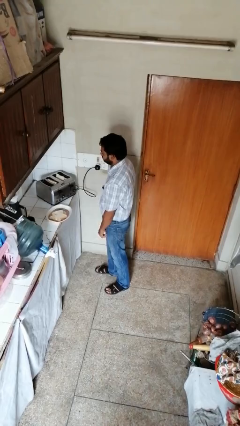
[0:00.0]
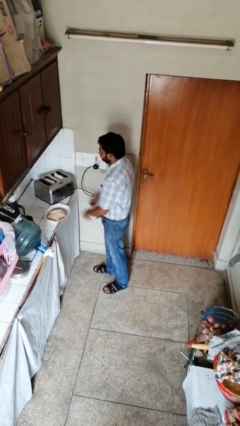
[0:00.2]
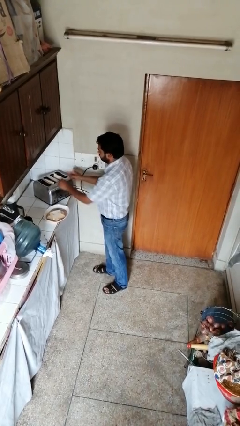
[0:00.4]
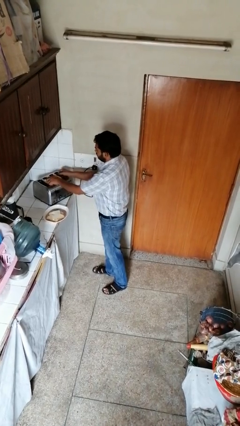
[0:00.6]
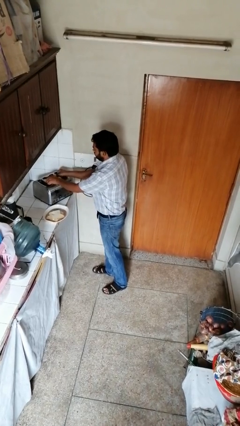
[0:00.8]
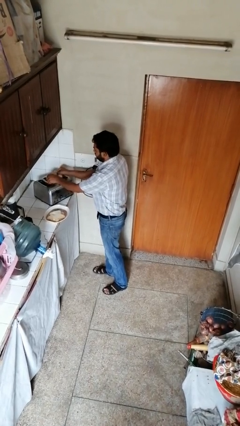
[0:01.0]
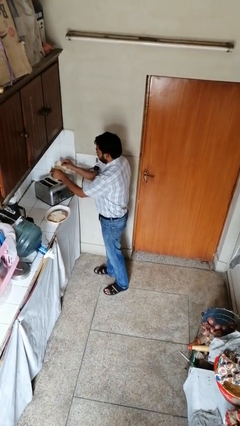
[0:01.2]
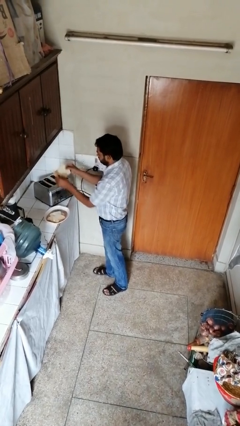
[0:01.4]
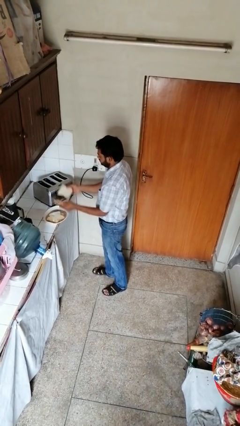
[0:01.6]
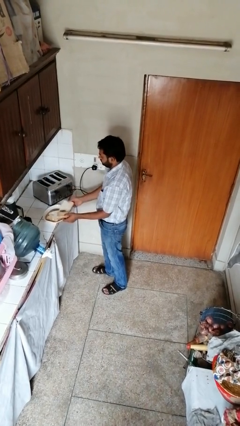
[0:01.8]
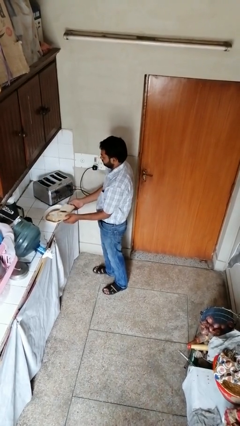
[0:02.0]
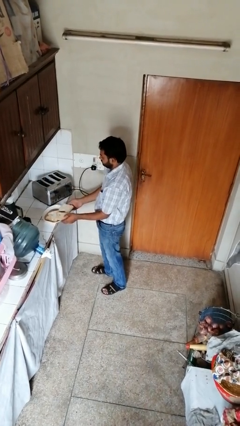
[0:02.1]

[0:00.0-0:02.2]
person takes object from toaster

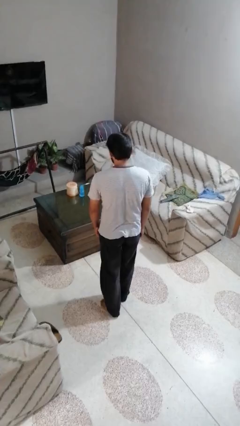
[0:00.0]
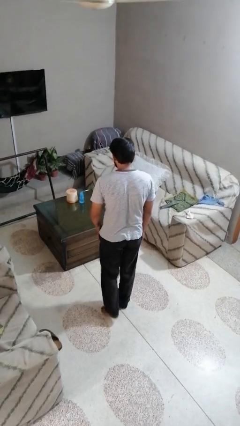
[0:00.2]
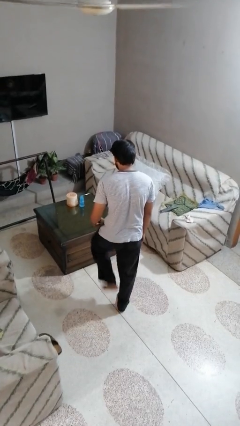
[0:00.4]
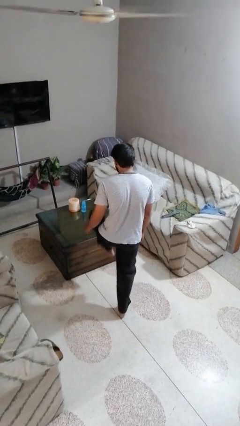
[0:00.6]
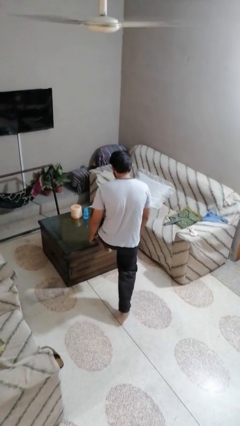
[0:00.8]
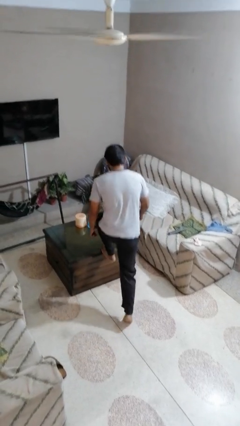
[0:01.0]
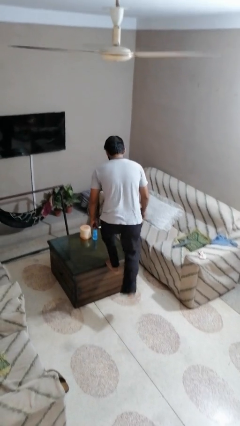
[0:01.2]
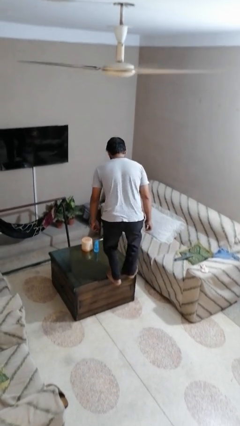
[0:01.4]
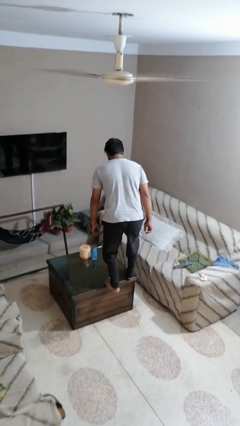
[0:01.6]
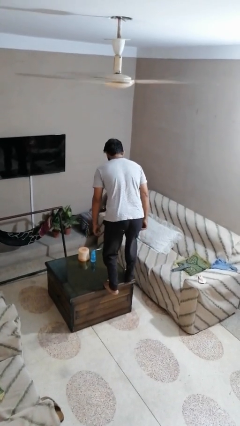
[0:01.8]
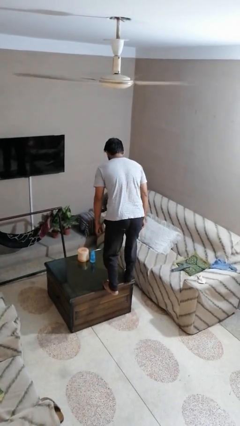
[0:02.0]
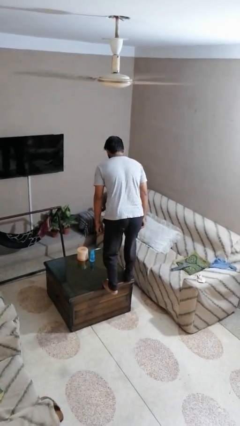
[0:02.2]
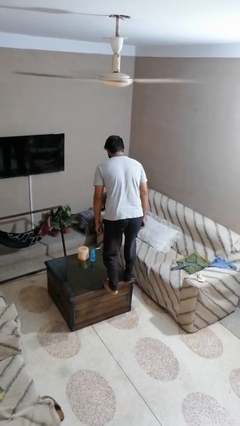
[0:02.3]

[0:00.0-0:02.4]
person climbs on table

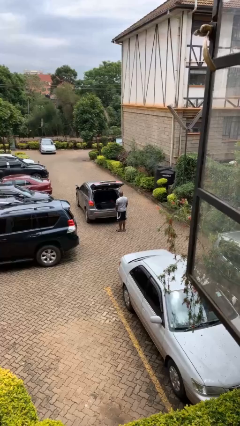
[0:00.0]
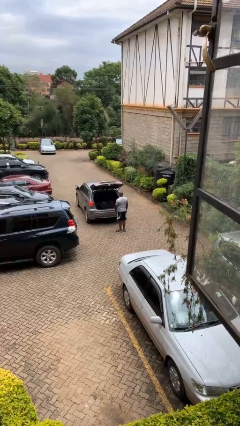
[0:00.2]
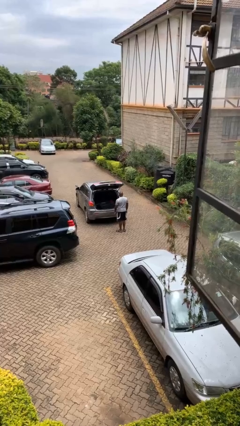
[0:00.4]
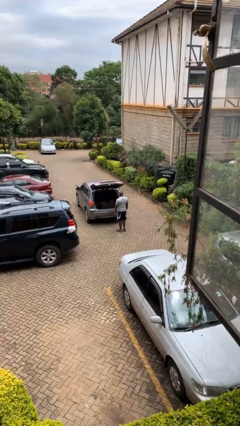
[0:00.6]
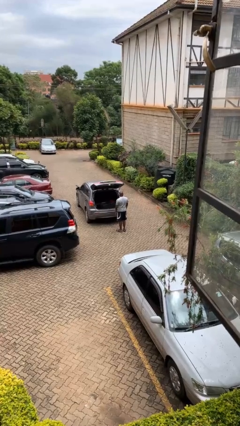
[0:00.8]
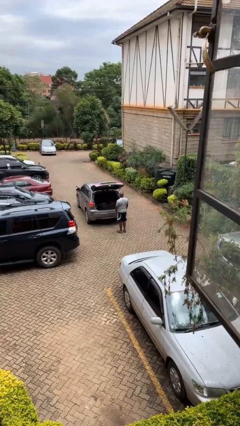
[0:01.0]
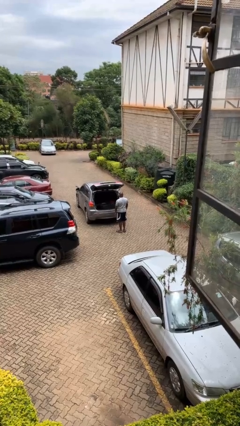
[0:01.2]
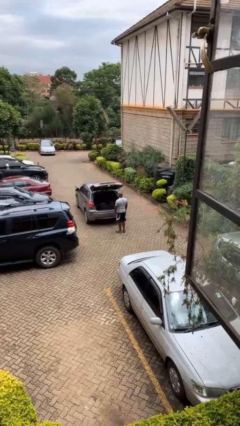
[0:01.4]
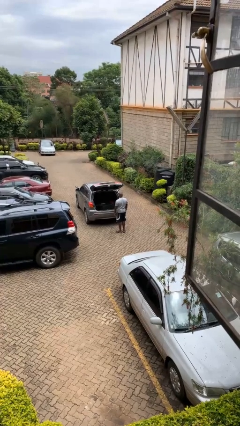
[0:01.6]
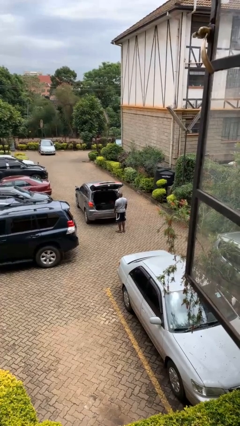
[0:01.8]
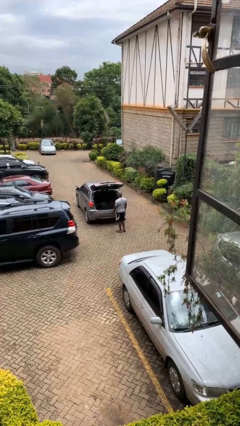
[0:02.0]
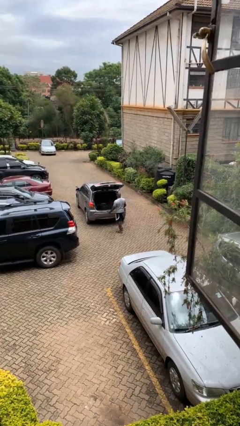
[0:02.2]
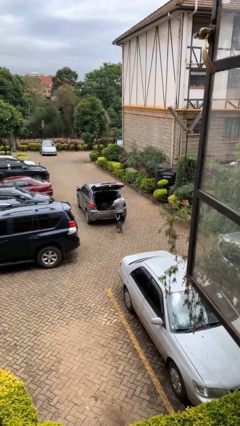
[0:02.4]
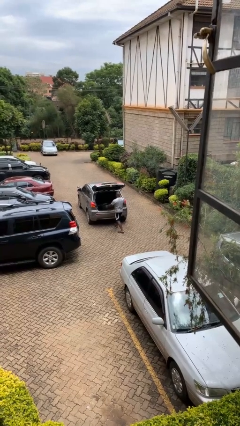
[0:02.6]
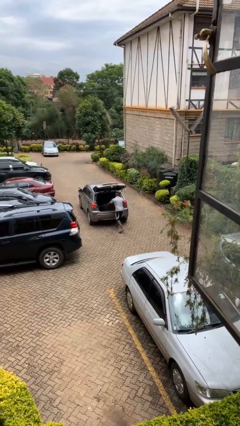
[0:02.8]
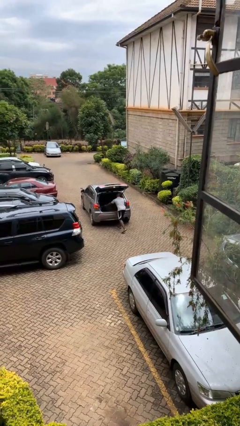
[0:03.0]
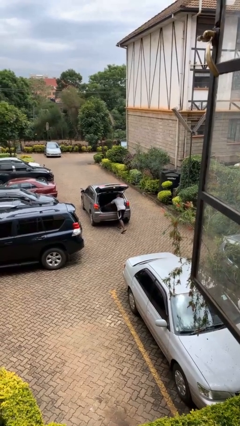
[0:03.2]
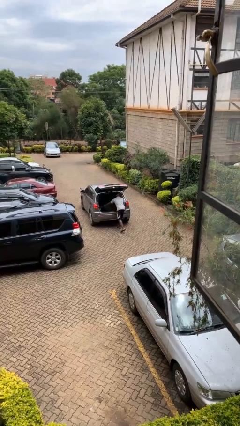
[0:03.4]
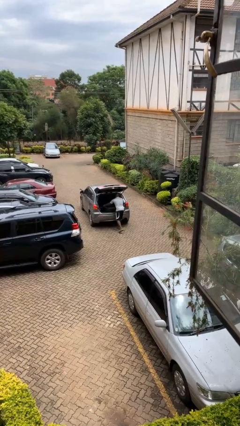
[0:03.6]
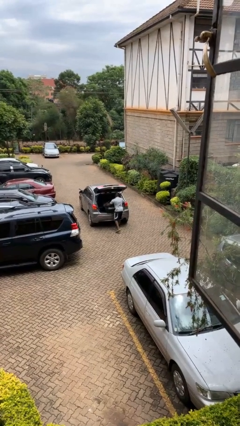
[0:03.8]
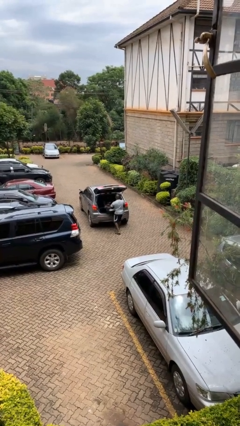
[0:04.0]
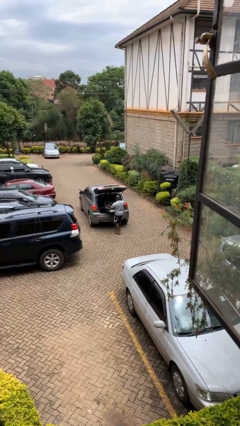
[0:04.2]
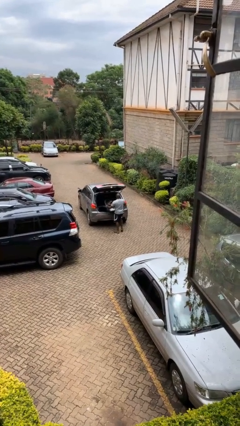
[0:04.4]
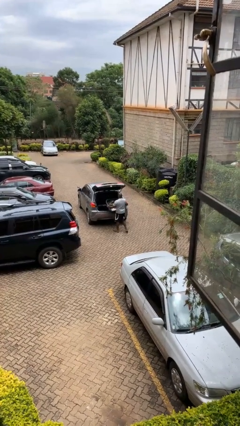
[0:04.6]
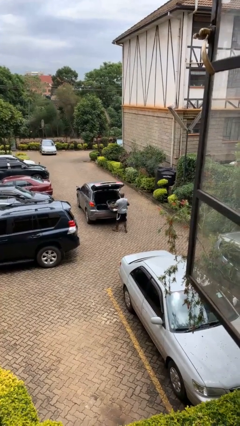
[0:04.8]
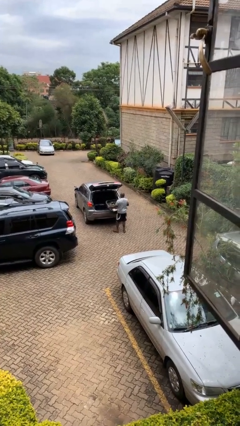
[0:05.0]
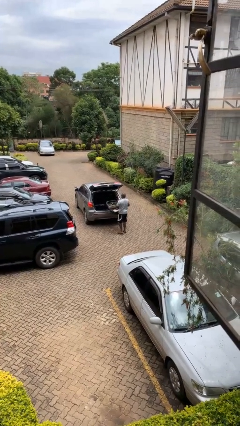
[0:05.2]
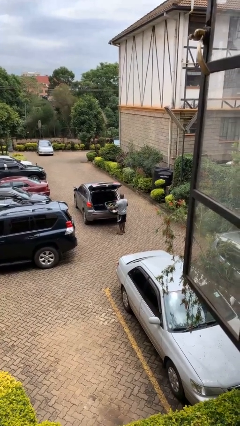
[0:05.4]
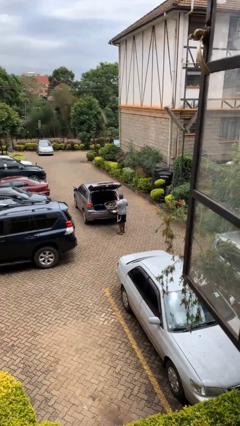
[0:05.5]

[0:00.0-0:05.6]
person unloads car

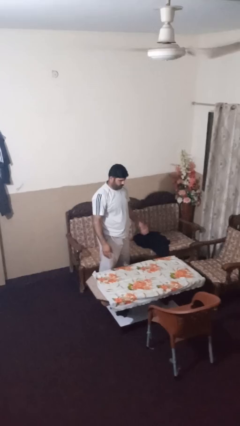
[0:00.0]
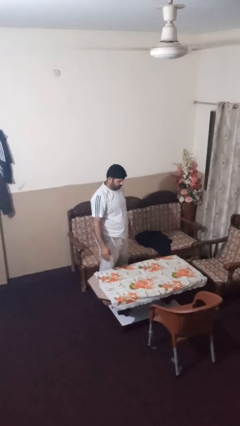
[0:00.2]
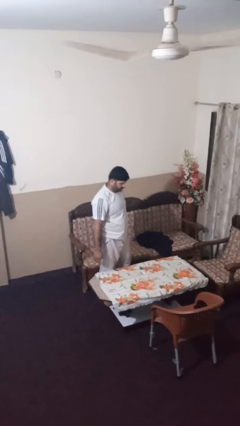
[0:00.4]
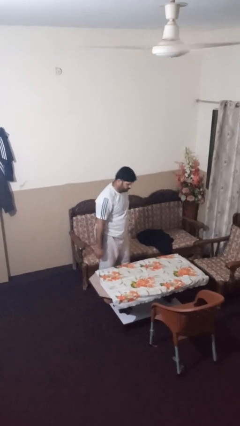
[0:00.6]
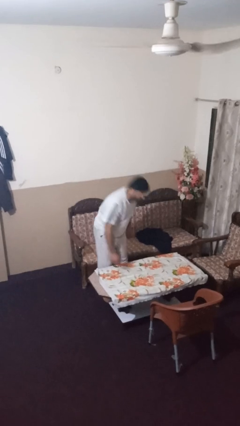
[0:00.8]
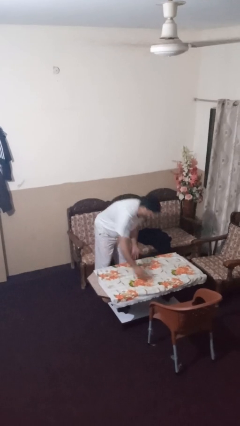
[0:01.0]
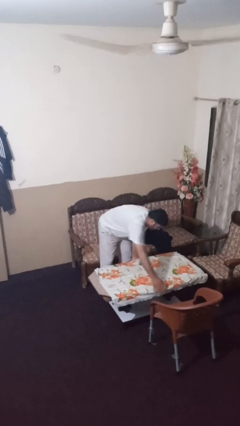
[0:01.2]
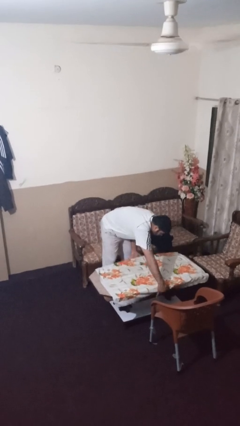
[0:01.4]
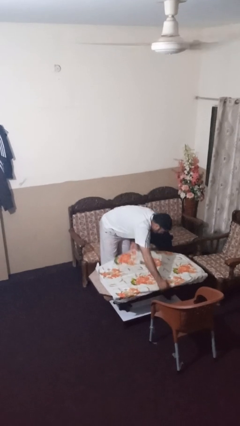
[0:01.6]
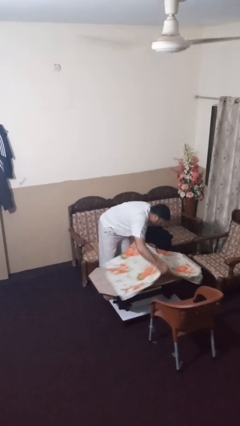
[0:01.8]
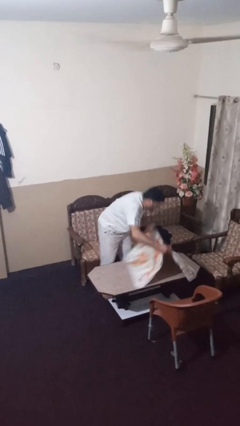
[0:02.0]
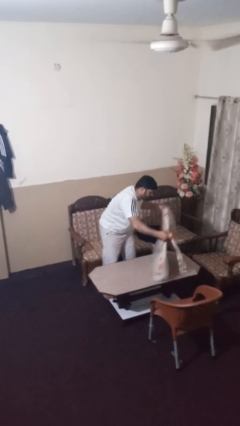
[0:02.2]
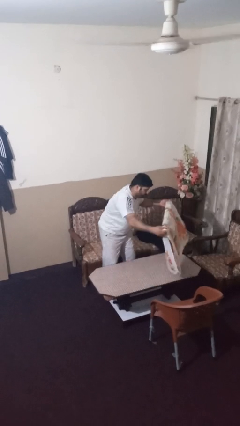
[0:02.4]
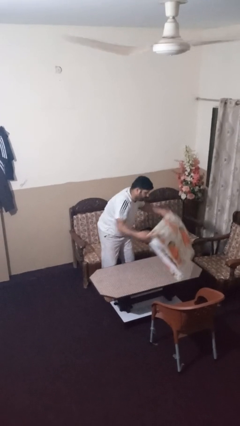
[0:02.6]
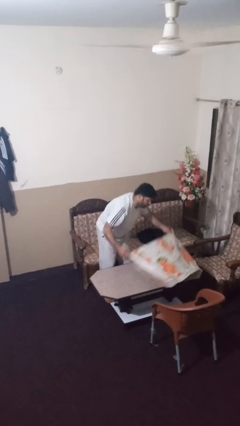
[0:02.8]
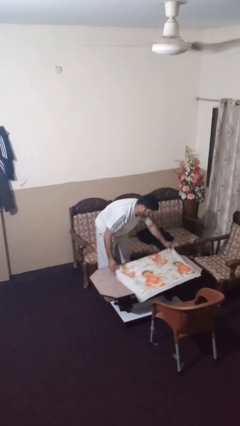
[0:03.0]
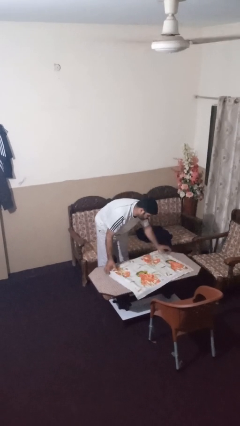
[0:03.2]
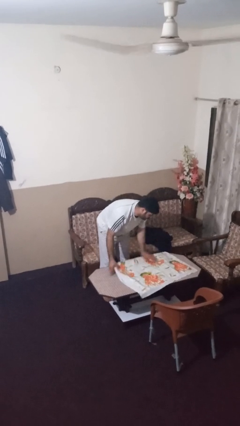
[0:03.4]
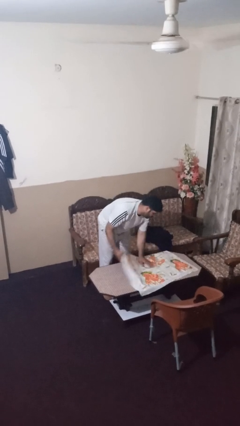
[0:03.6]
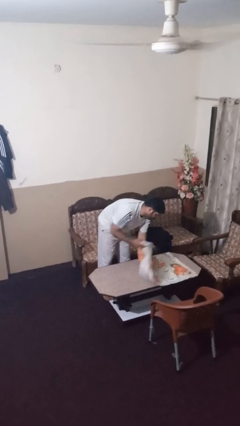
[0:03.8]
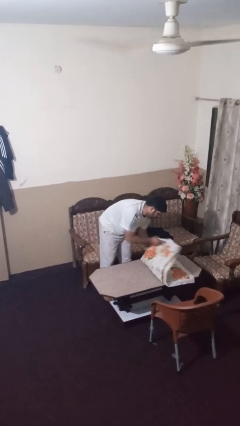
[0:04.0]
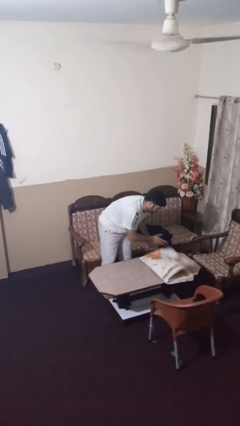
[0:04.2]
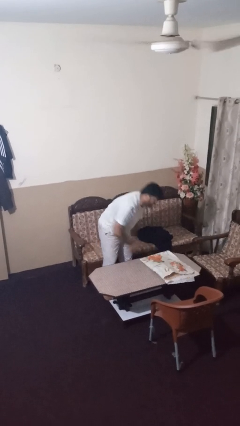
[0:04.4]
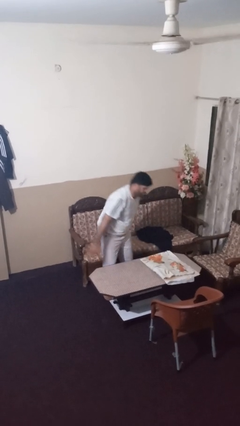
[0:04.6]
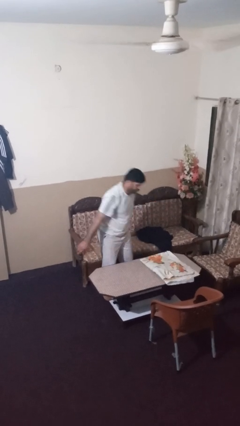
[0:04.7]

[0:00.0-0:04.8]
person folds tablecloth

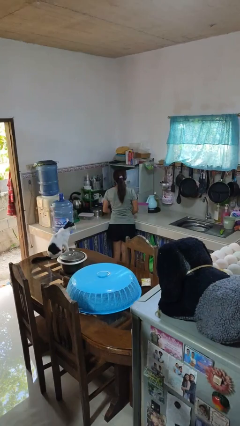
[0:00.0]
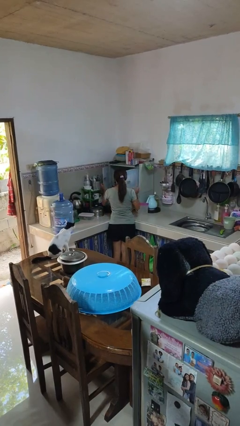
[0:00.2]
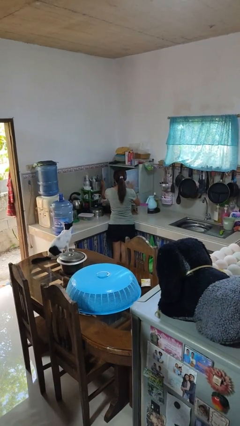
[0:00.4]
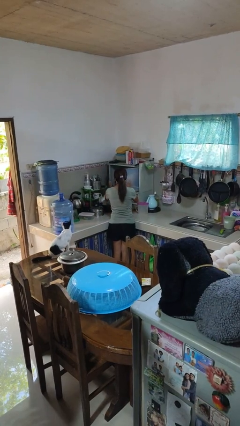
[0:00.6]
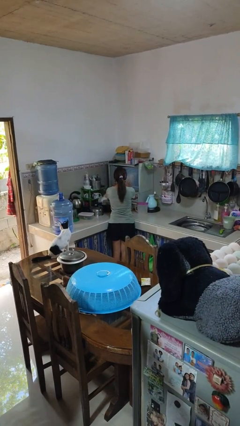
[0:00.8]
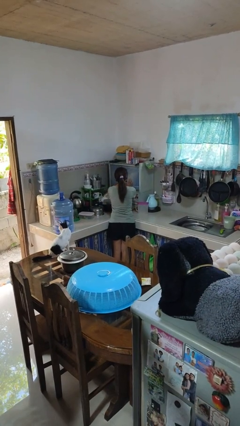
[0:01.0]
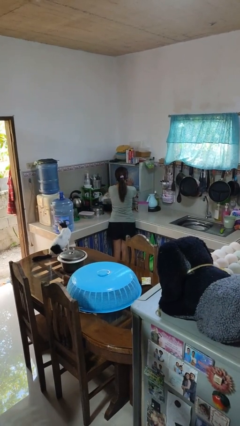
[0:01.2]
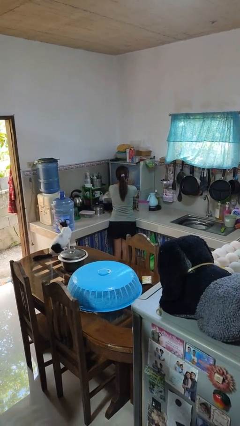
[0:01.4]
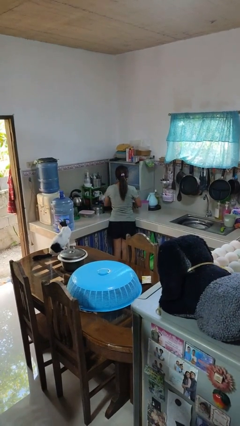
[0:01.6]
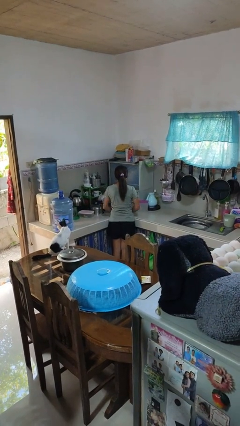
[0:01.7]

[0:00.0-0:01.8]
person closes kitchen drawer

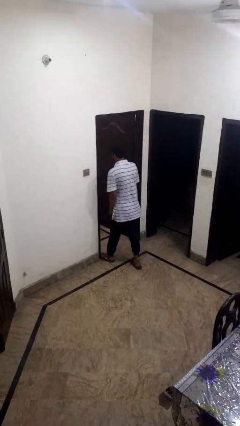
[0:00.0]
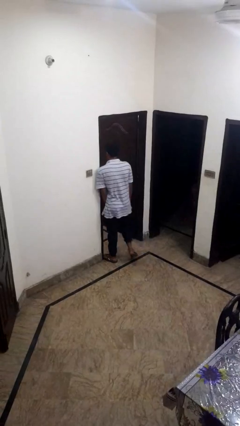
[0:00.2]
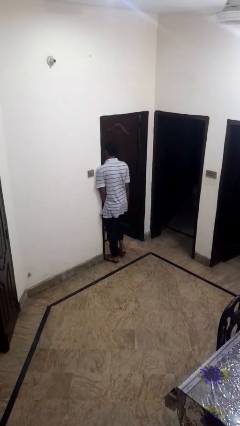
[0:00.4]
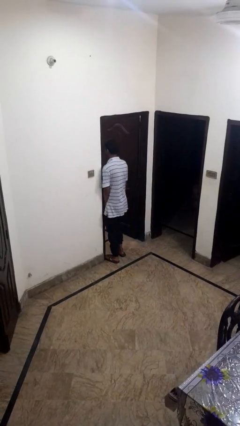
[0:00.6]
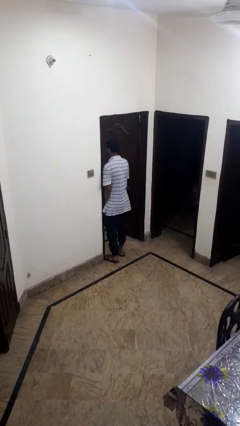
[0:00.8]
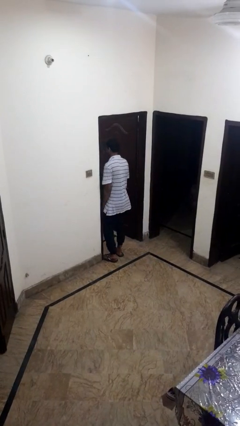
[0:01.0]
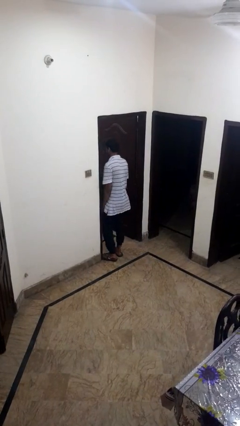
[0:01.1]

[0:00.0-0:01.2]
person bumps into wall
